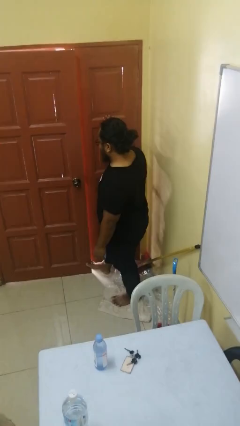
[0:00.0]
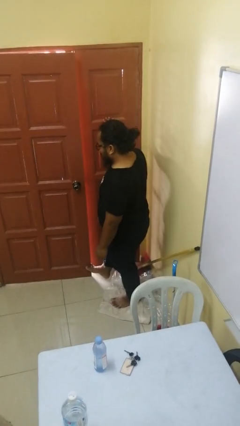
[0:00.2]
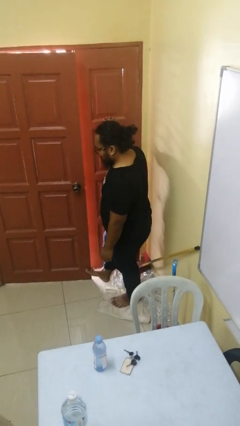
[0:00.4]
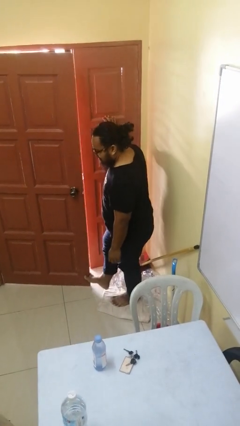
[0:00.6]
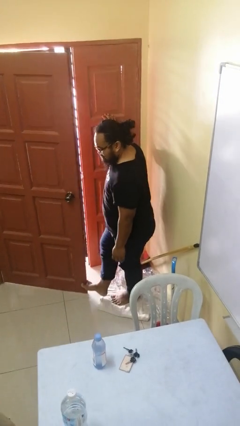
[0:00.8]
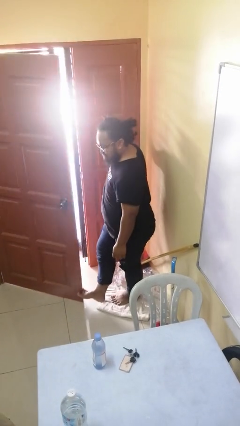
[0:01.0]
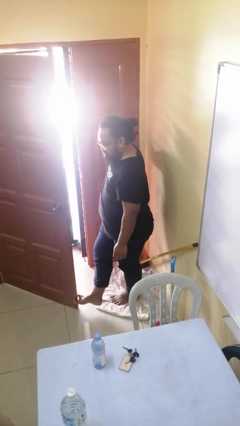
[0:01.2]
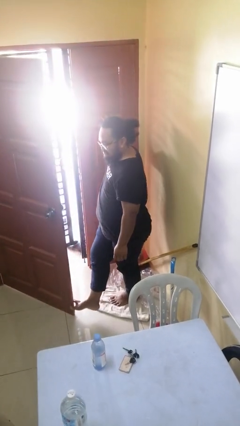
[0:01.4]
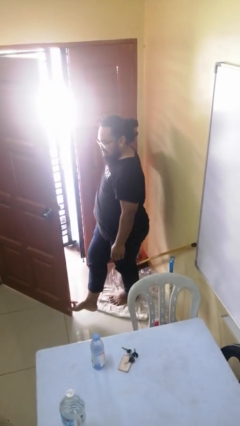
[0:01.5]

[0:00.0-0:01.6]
person opens facility door

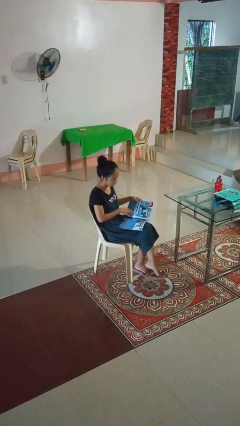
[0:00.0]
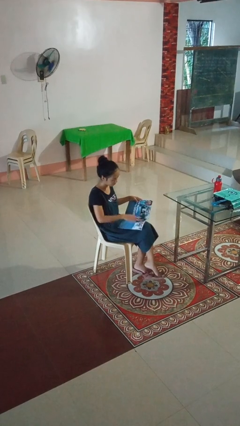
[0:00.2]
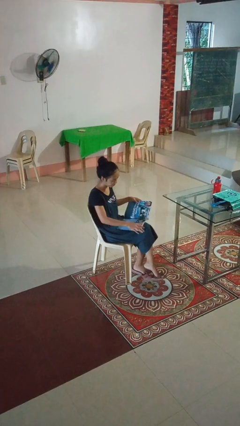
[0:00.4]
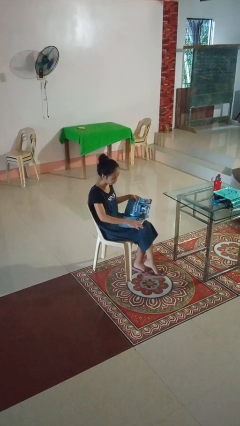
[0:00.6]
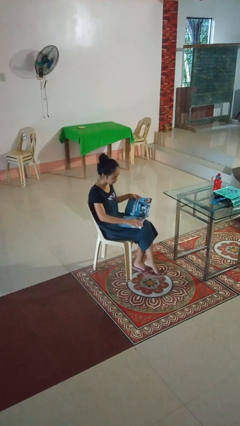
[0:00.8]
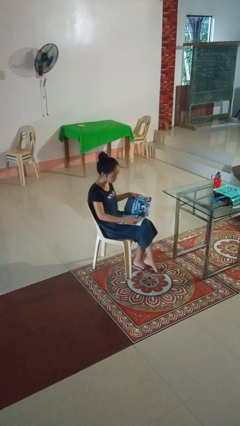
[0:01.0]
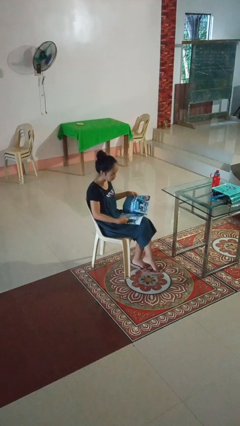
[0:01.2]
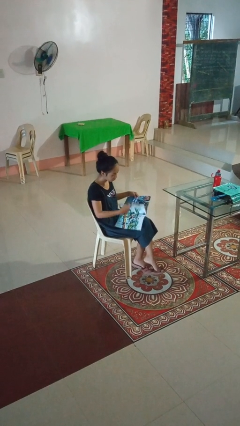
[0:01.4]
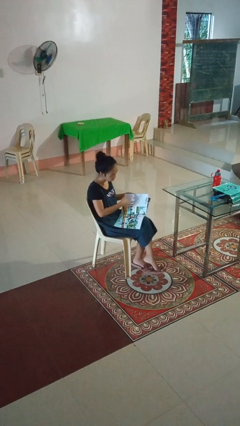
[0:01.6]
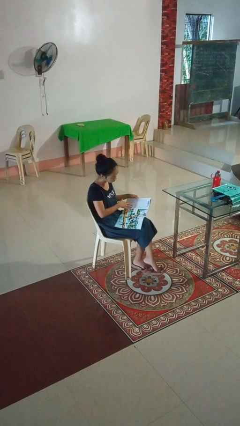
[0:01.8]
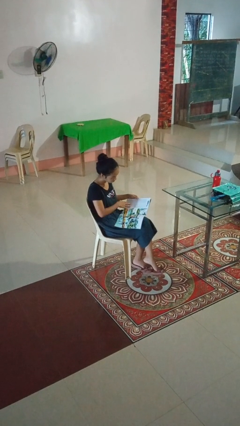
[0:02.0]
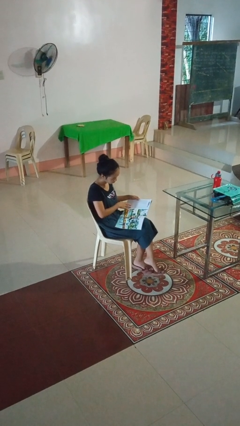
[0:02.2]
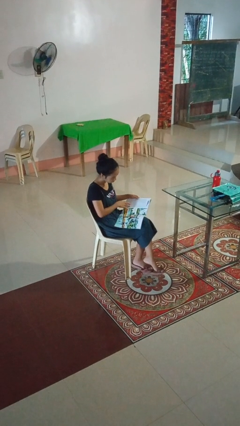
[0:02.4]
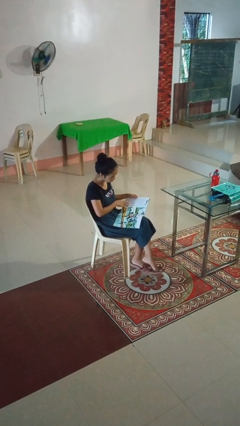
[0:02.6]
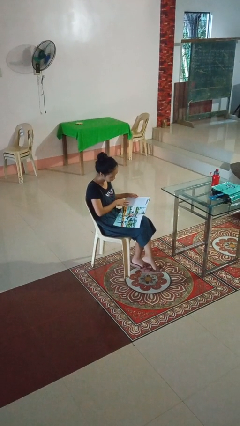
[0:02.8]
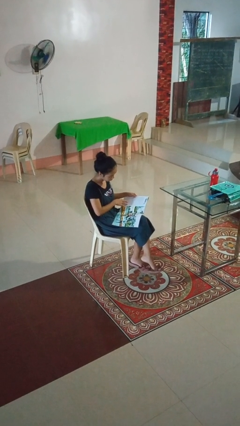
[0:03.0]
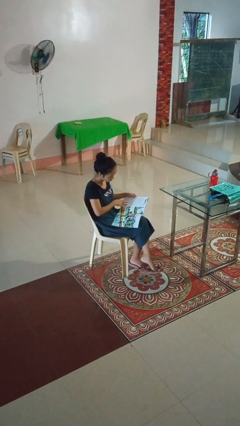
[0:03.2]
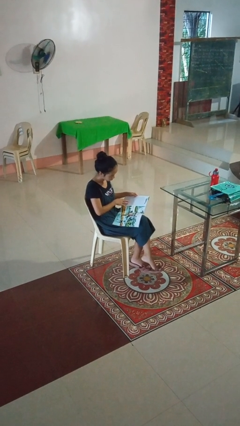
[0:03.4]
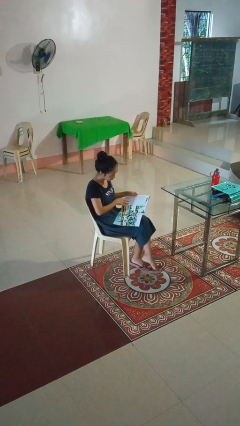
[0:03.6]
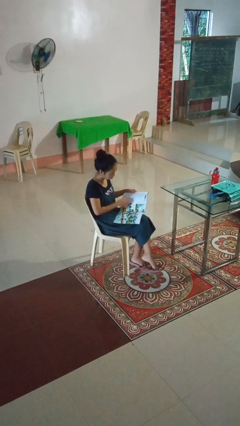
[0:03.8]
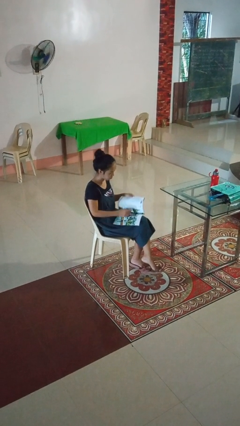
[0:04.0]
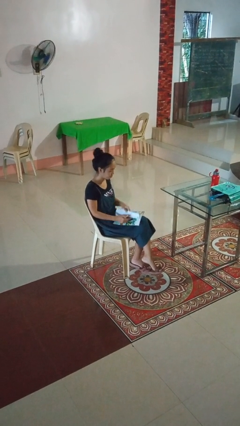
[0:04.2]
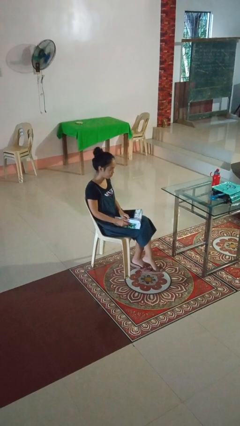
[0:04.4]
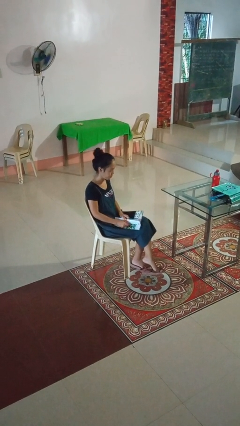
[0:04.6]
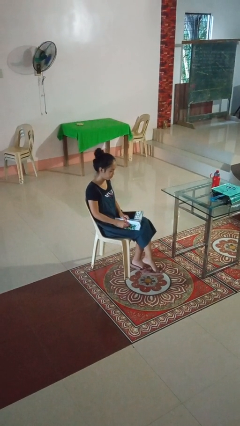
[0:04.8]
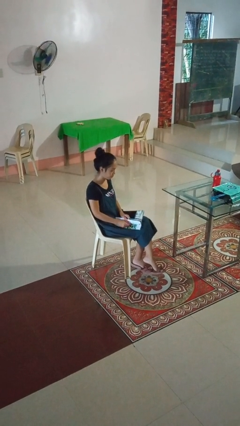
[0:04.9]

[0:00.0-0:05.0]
person reads magazine

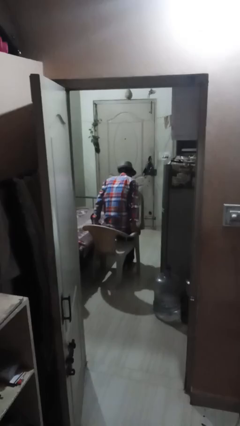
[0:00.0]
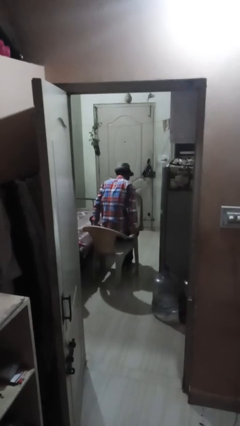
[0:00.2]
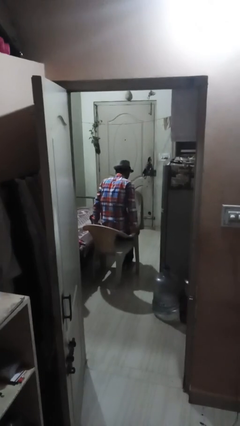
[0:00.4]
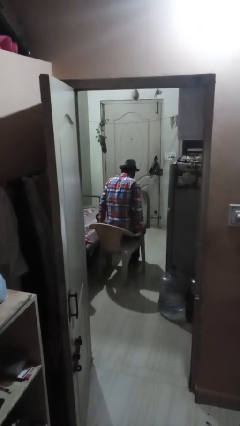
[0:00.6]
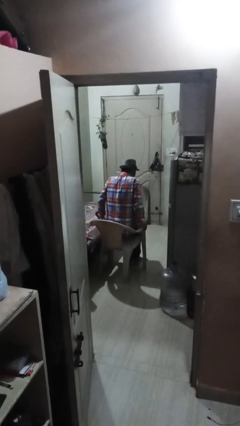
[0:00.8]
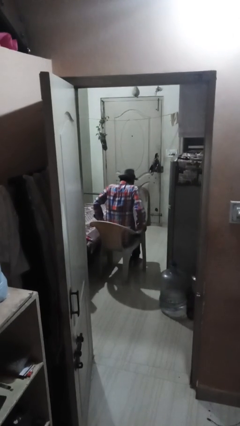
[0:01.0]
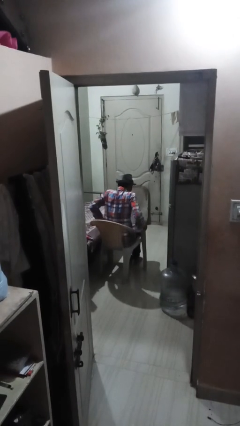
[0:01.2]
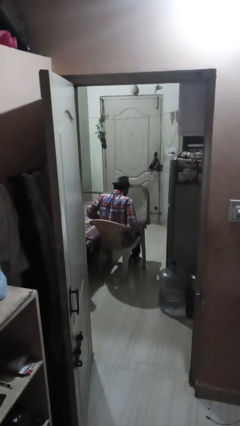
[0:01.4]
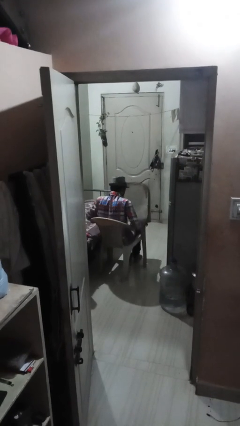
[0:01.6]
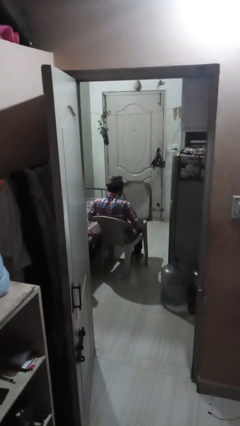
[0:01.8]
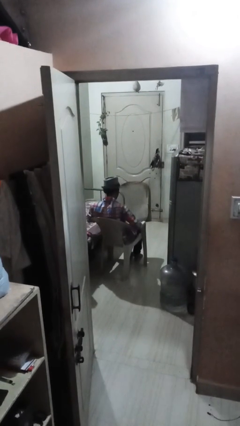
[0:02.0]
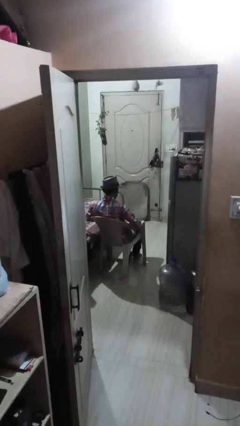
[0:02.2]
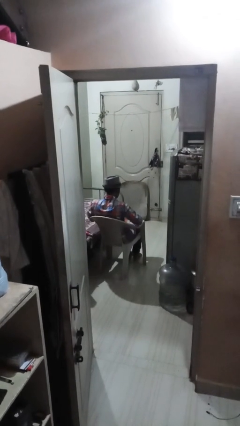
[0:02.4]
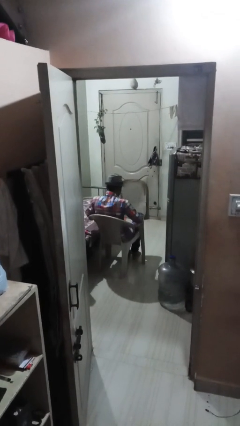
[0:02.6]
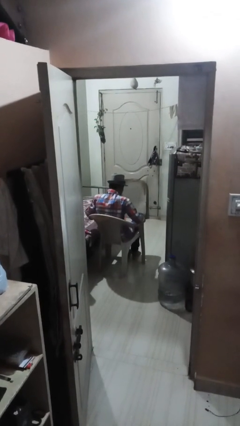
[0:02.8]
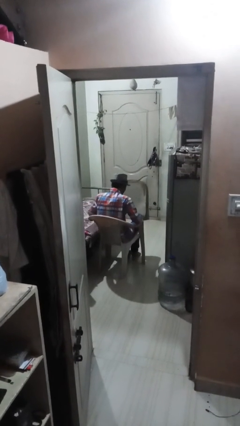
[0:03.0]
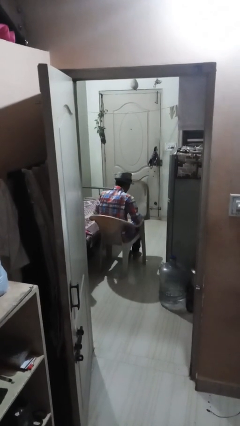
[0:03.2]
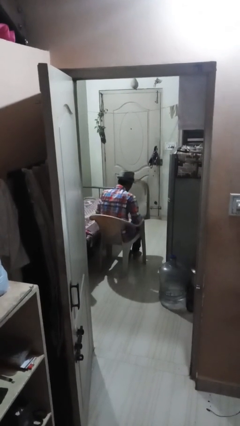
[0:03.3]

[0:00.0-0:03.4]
person sits down

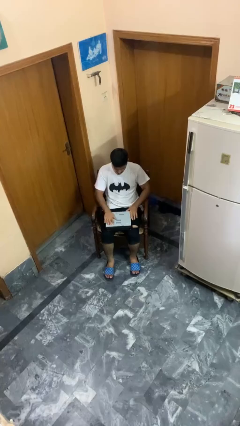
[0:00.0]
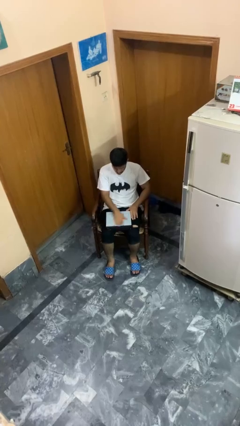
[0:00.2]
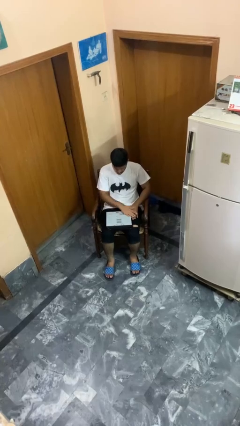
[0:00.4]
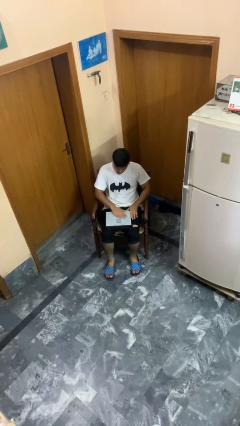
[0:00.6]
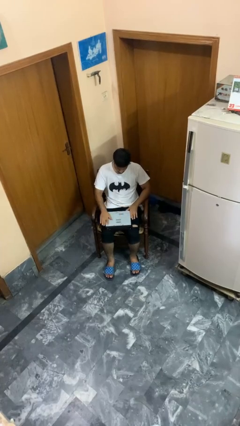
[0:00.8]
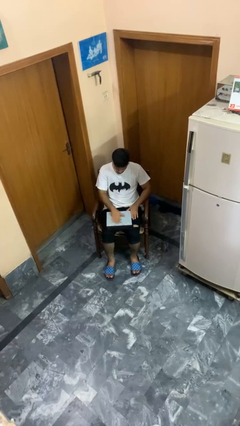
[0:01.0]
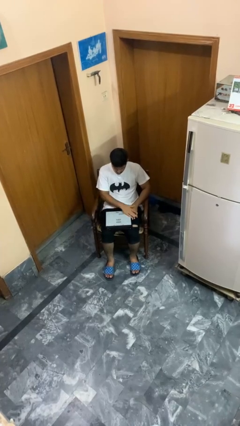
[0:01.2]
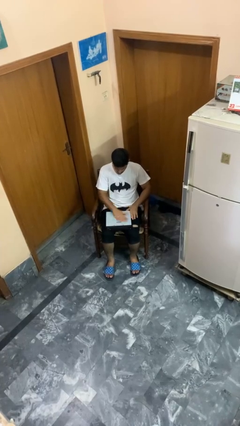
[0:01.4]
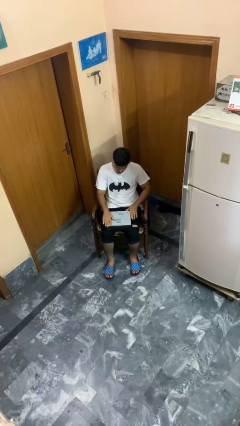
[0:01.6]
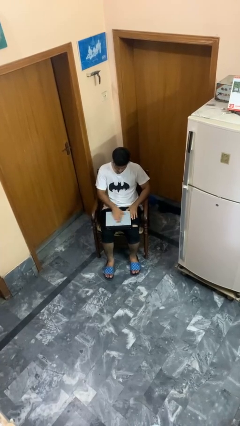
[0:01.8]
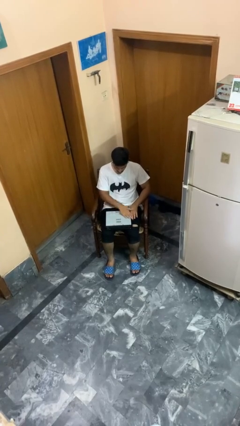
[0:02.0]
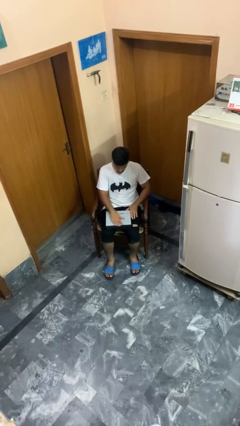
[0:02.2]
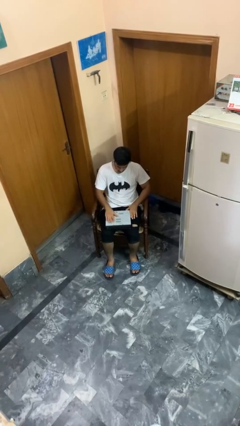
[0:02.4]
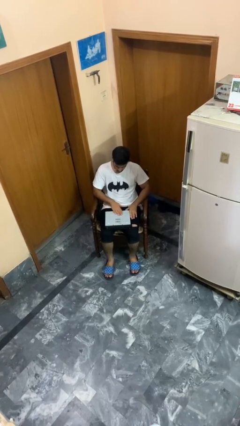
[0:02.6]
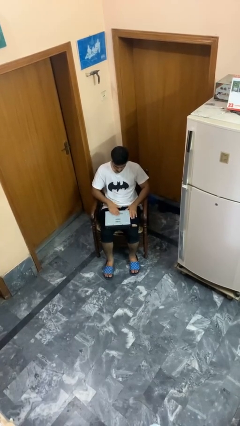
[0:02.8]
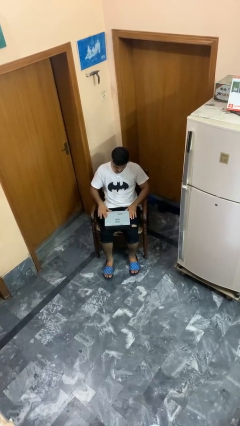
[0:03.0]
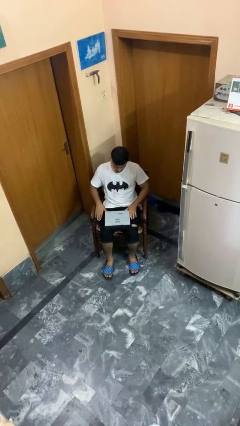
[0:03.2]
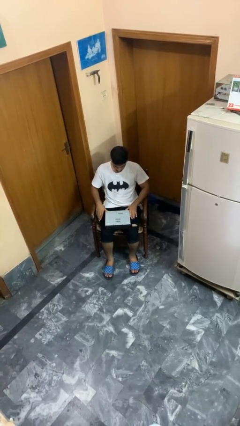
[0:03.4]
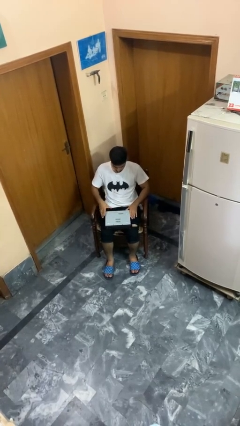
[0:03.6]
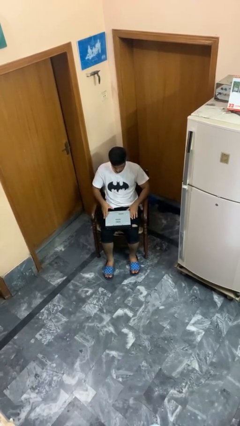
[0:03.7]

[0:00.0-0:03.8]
person waves hand over object

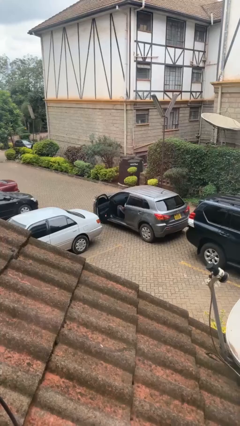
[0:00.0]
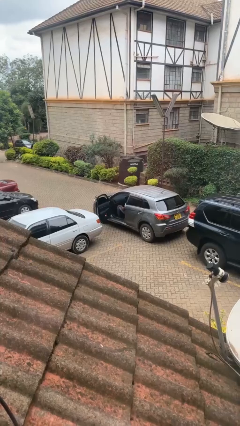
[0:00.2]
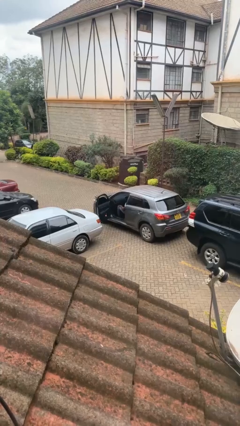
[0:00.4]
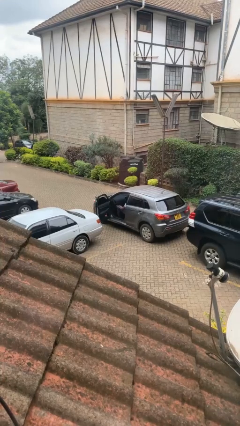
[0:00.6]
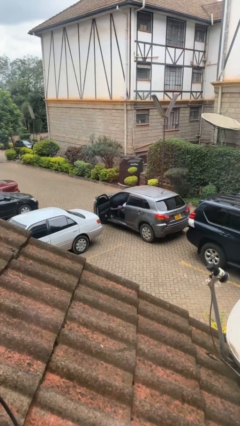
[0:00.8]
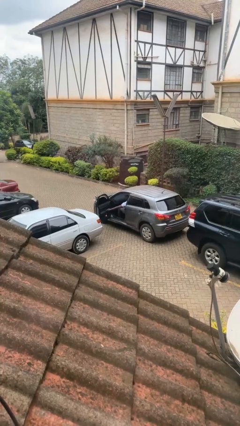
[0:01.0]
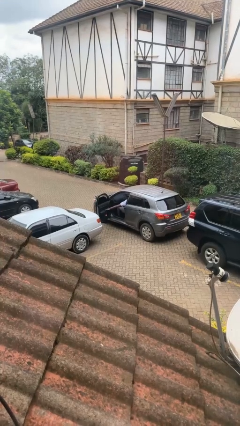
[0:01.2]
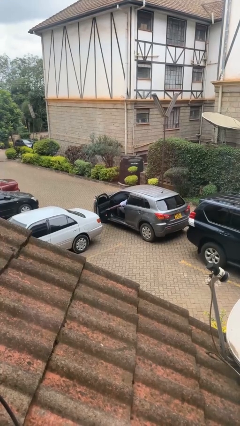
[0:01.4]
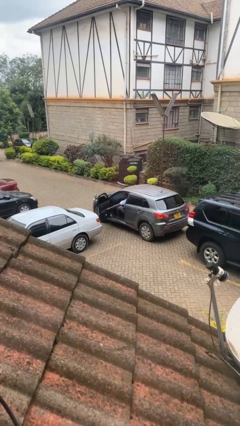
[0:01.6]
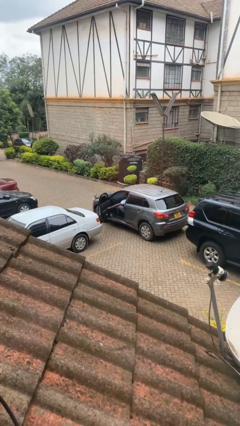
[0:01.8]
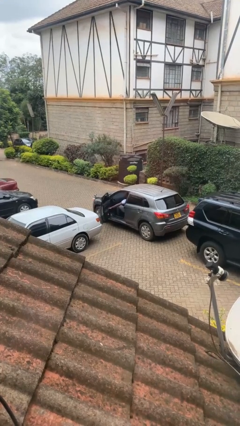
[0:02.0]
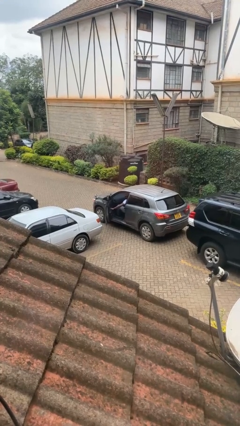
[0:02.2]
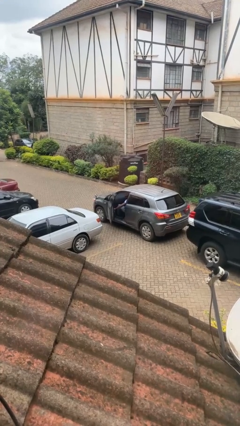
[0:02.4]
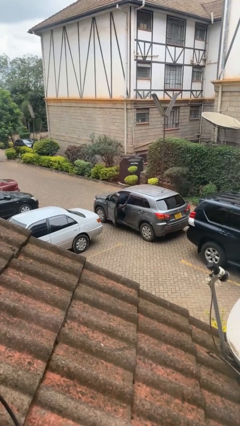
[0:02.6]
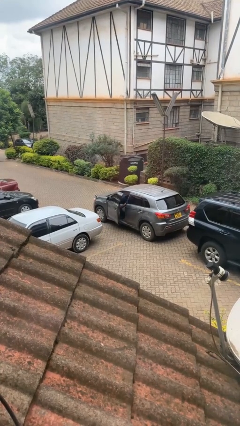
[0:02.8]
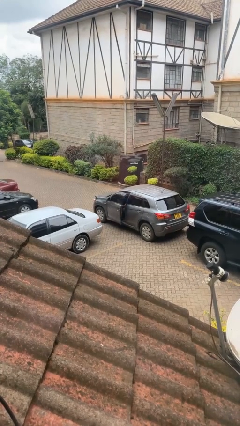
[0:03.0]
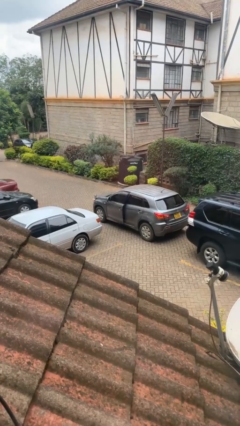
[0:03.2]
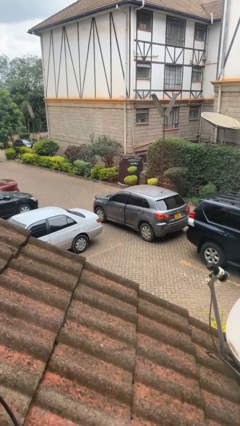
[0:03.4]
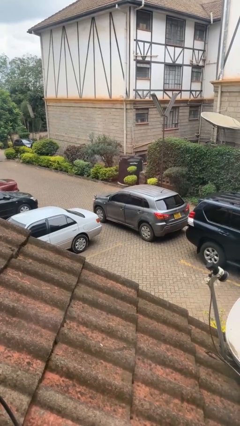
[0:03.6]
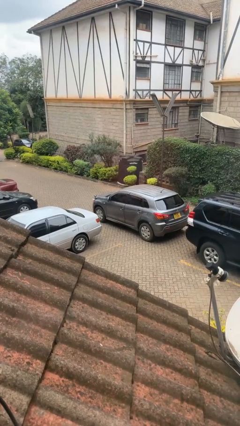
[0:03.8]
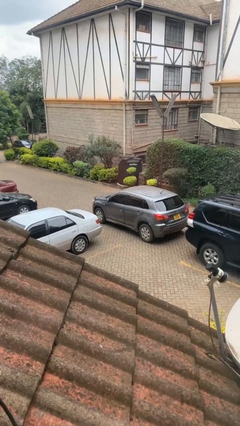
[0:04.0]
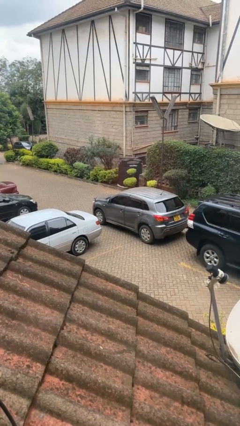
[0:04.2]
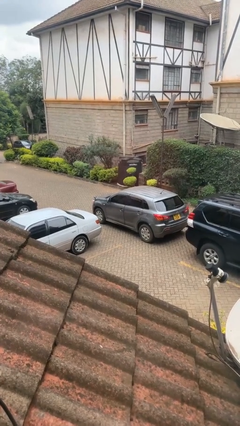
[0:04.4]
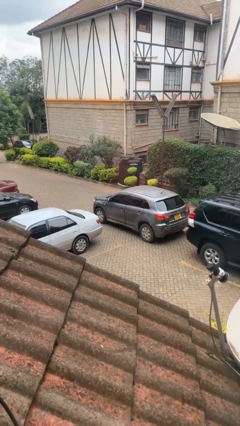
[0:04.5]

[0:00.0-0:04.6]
person closes car door
